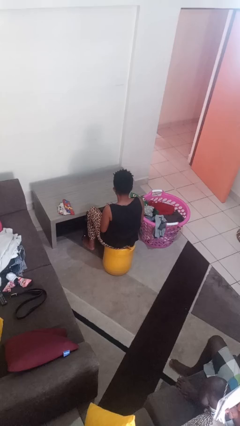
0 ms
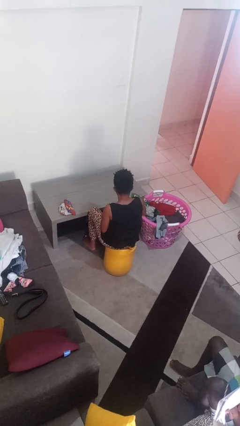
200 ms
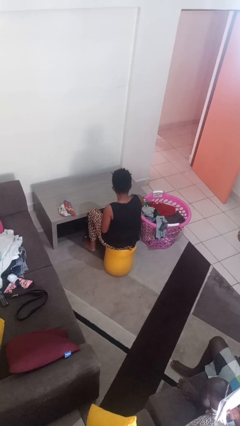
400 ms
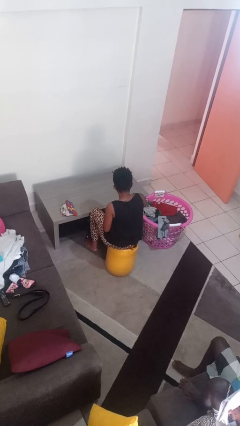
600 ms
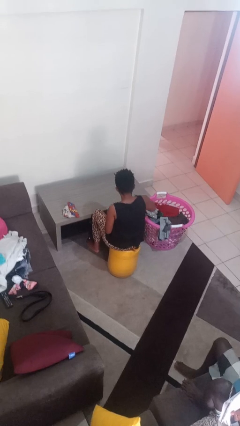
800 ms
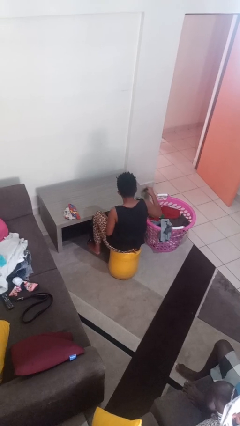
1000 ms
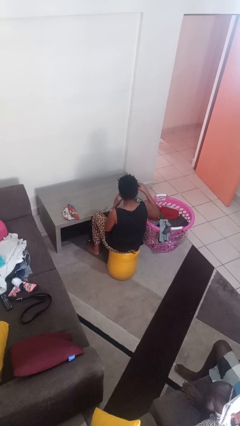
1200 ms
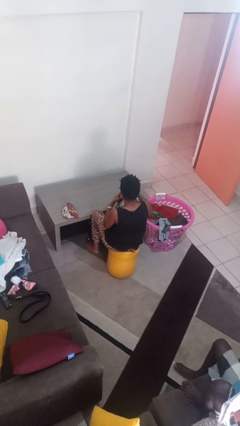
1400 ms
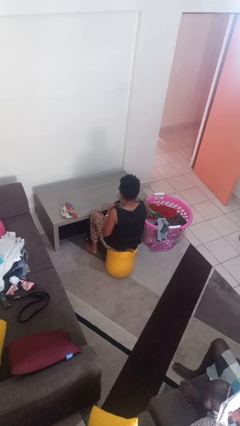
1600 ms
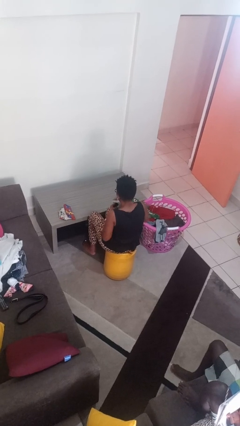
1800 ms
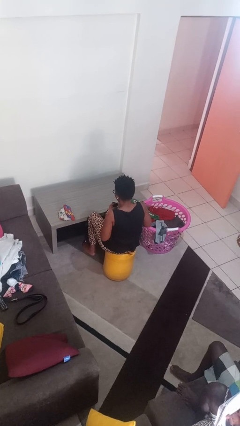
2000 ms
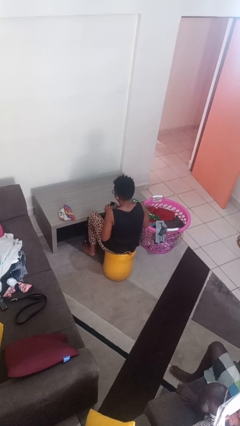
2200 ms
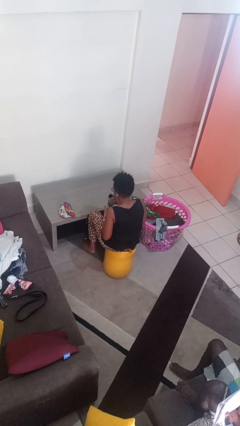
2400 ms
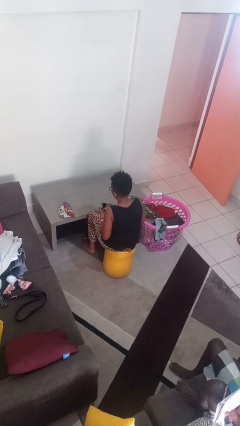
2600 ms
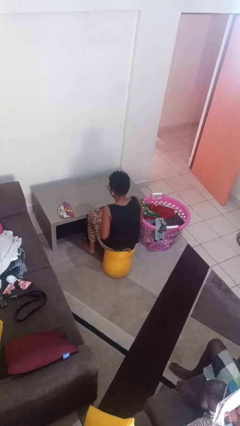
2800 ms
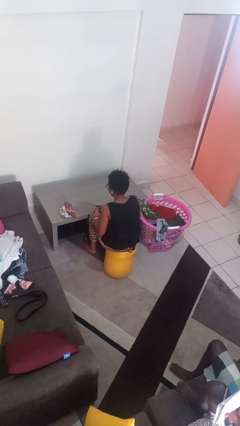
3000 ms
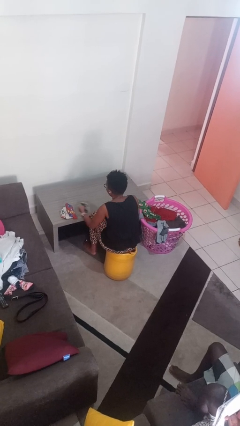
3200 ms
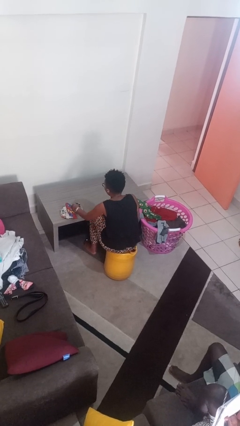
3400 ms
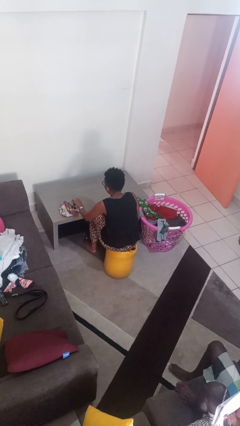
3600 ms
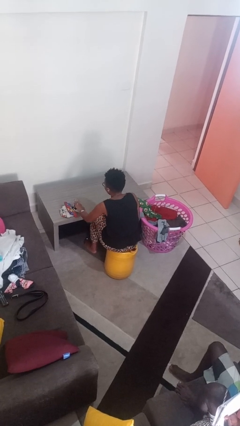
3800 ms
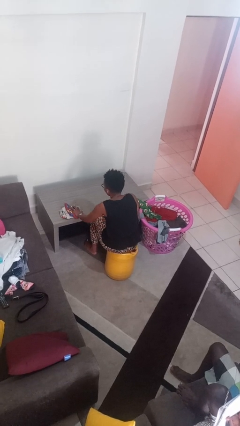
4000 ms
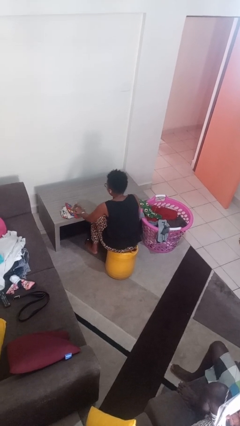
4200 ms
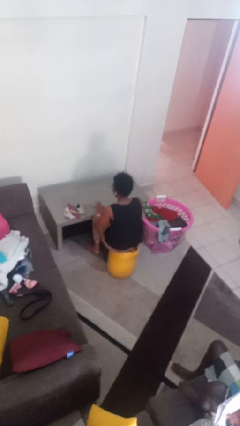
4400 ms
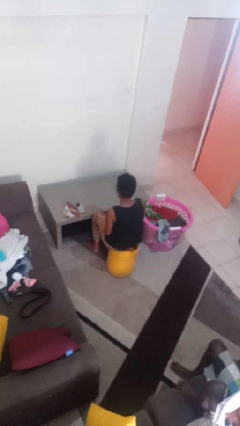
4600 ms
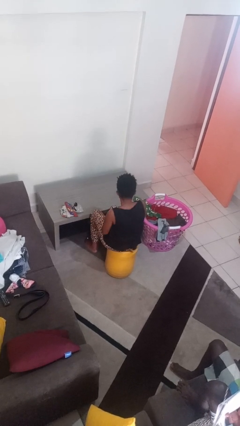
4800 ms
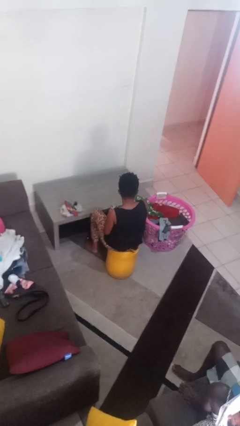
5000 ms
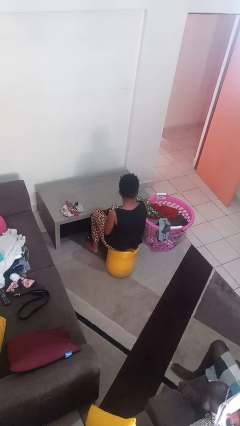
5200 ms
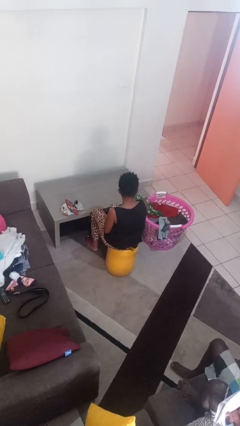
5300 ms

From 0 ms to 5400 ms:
person folds socks

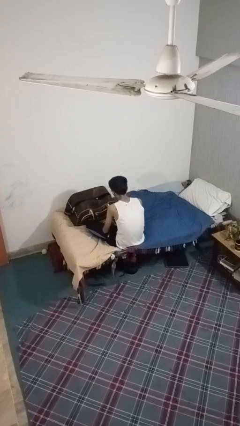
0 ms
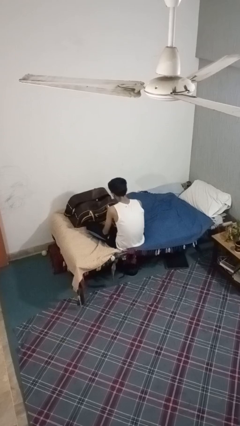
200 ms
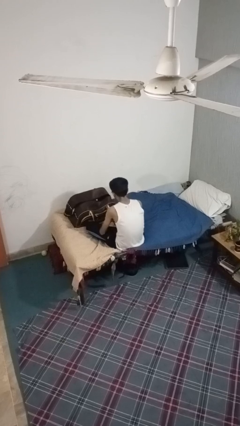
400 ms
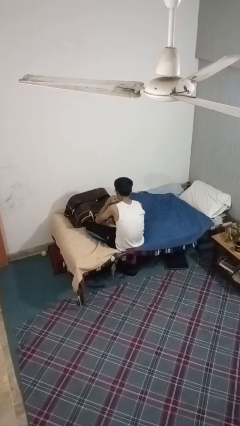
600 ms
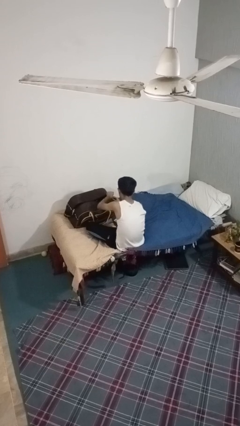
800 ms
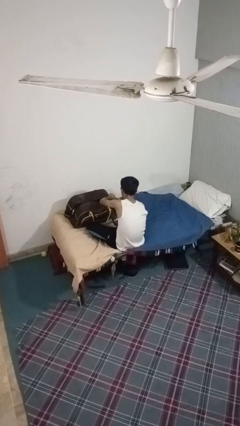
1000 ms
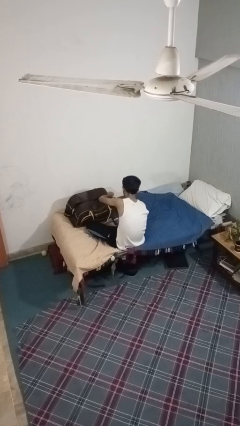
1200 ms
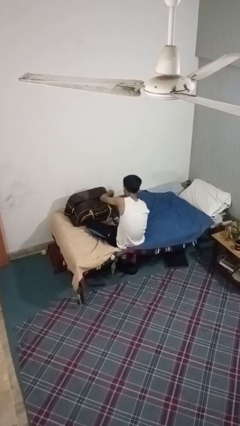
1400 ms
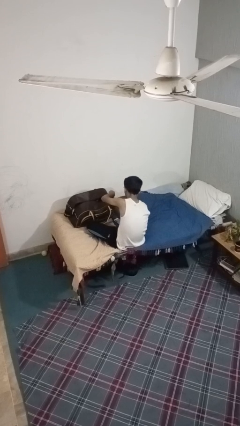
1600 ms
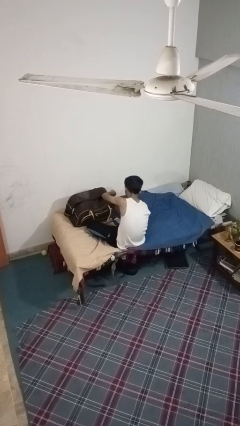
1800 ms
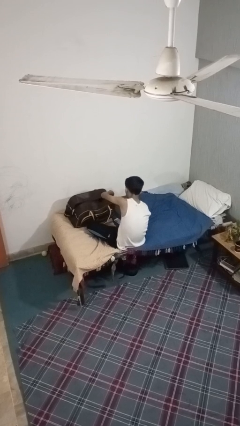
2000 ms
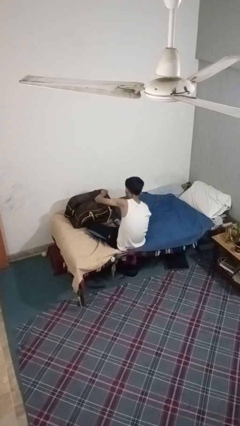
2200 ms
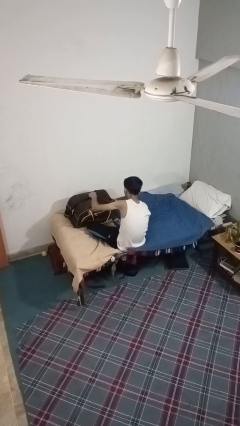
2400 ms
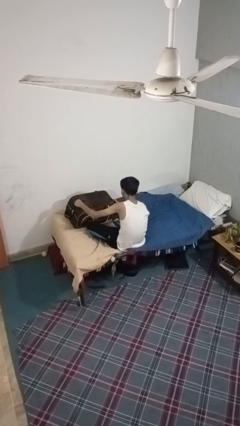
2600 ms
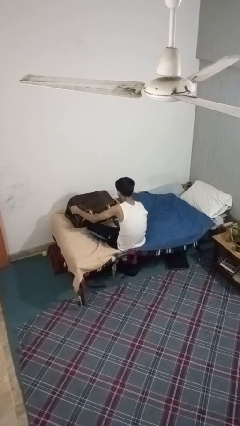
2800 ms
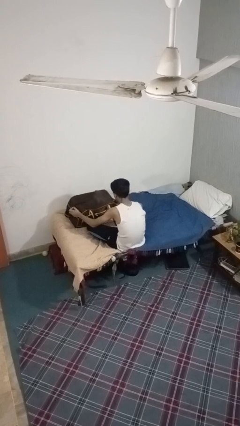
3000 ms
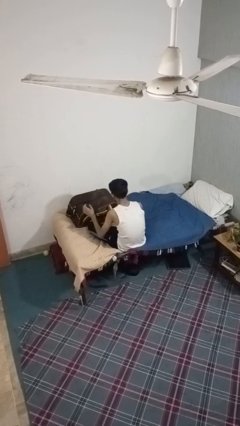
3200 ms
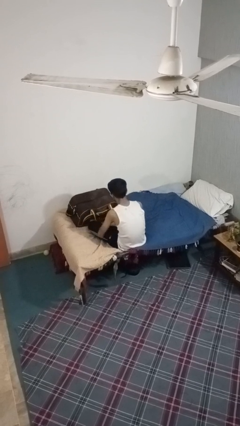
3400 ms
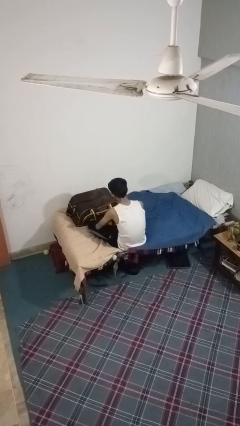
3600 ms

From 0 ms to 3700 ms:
person closes suitcase

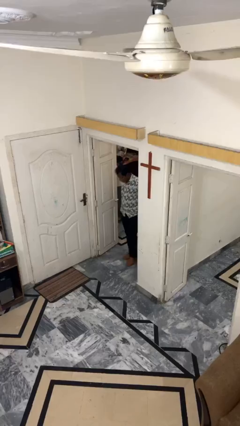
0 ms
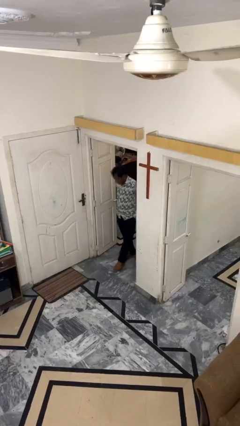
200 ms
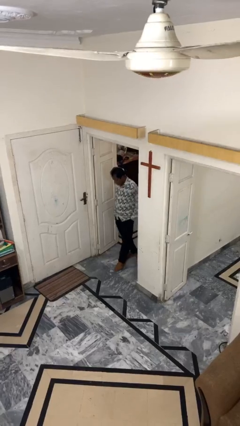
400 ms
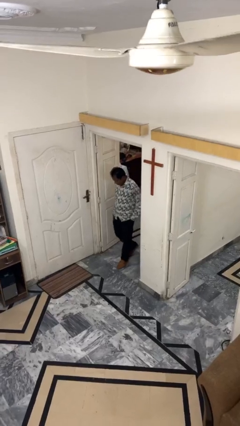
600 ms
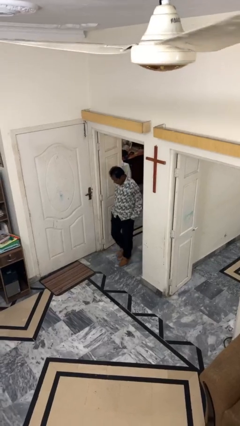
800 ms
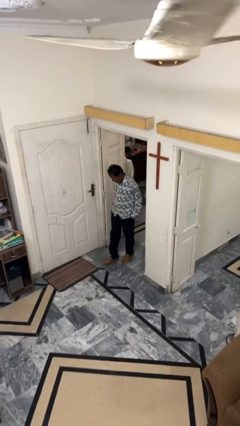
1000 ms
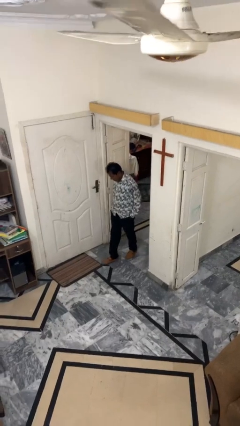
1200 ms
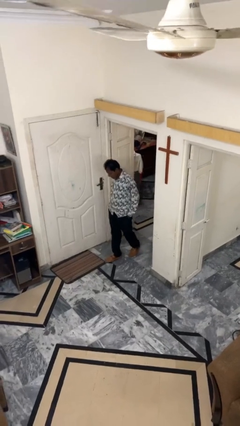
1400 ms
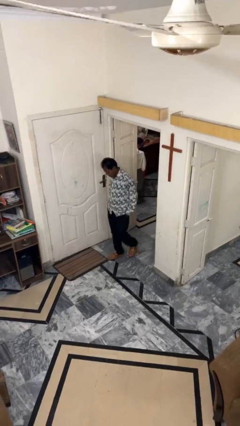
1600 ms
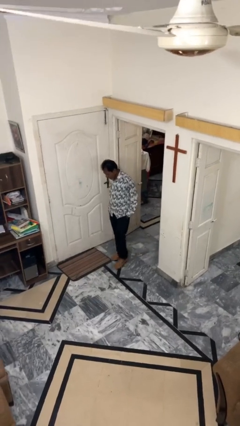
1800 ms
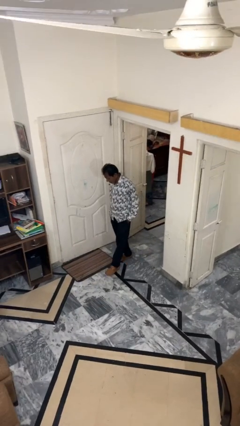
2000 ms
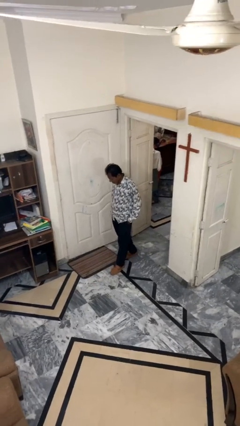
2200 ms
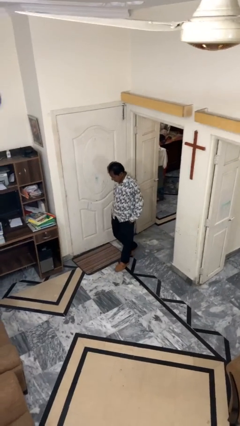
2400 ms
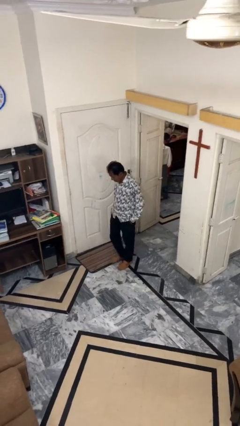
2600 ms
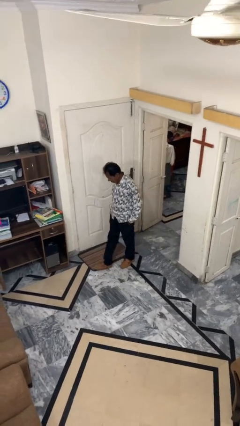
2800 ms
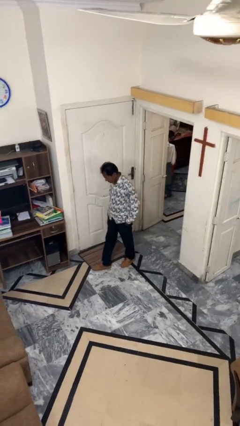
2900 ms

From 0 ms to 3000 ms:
person enters scene through structure

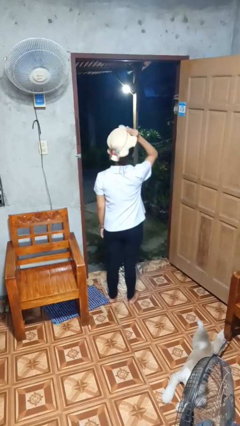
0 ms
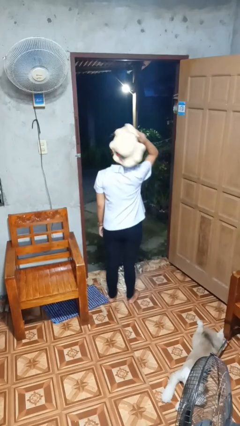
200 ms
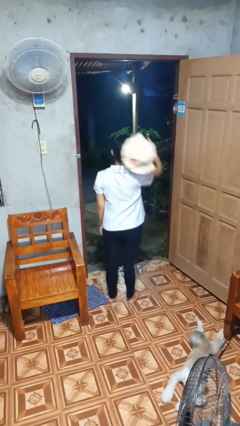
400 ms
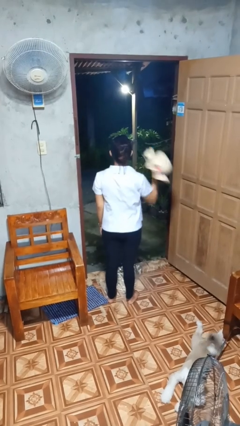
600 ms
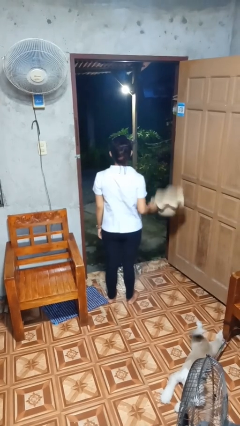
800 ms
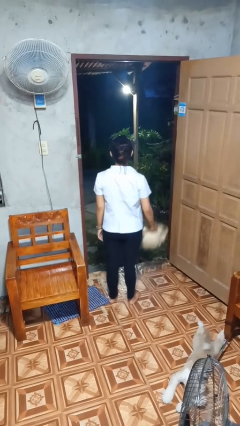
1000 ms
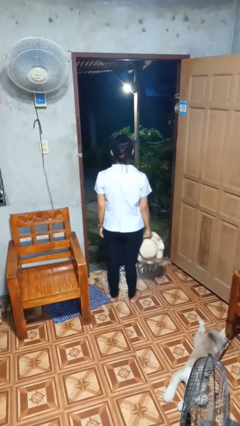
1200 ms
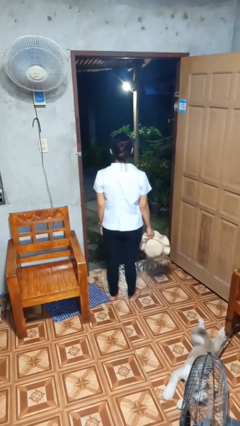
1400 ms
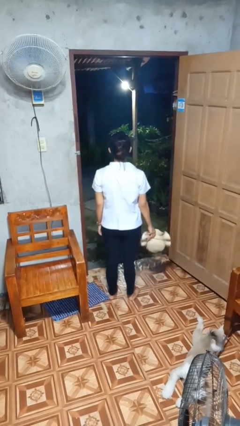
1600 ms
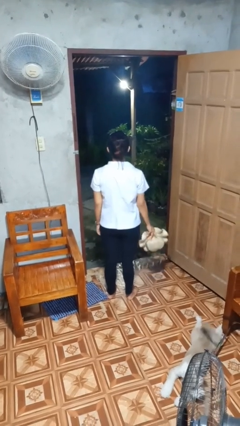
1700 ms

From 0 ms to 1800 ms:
person takes off hat

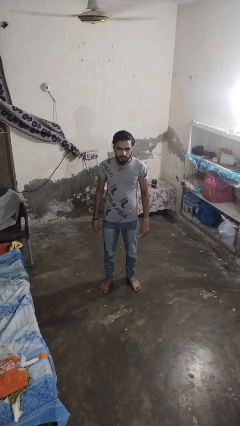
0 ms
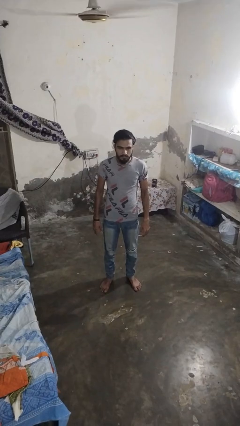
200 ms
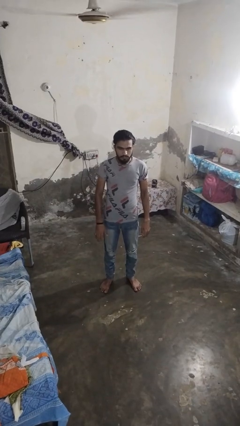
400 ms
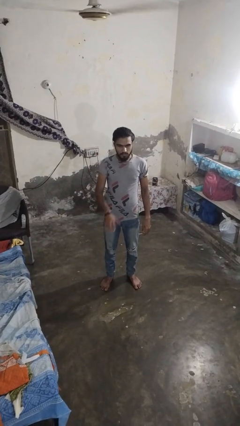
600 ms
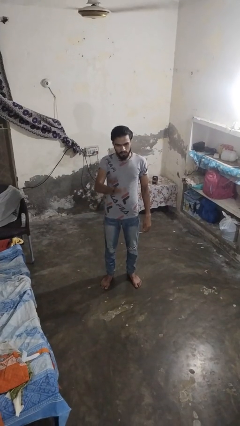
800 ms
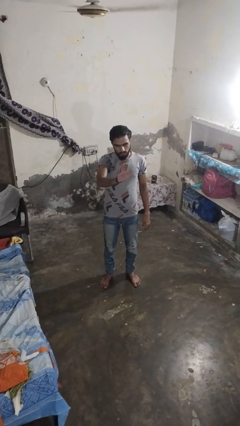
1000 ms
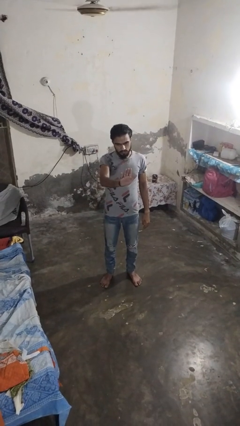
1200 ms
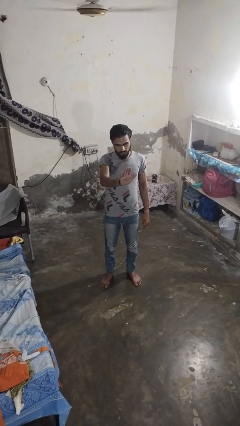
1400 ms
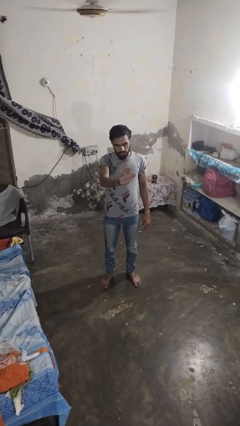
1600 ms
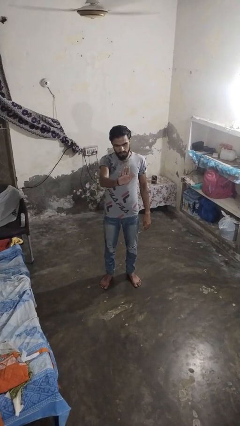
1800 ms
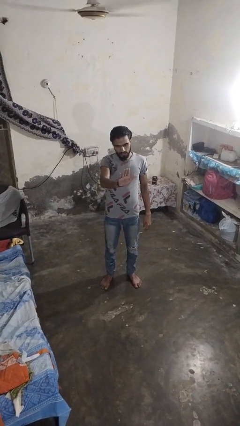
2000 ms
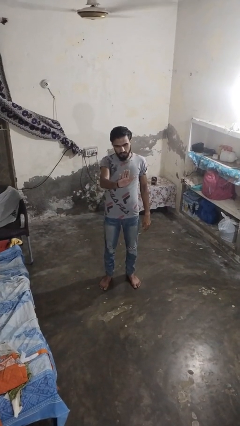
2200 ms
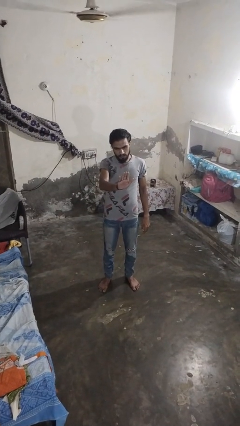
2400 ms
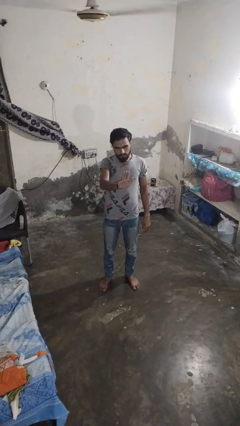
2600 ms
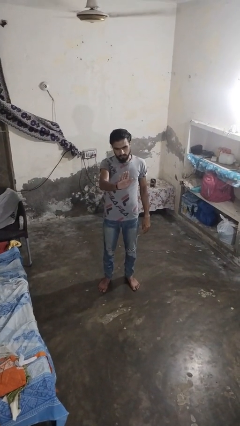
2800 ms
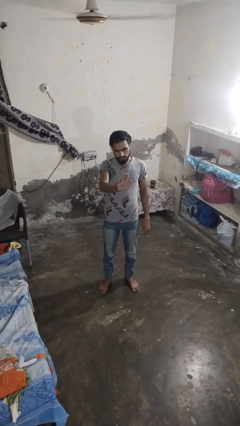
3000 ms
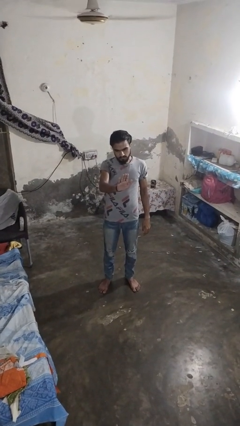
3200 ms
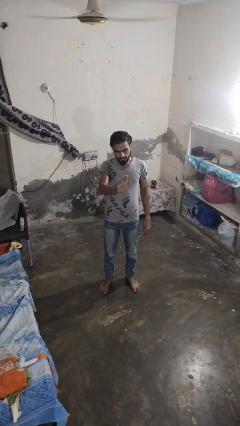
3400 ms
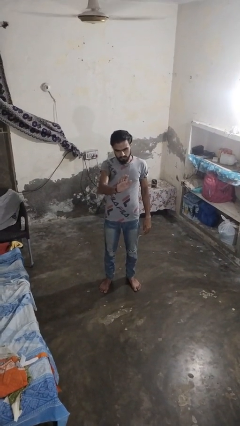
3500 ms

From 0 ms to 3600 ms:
person gestures stop

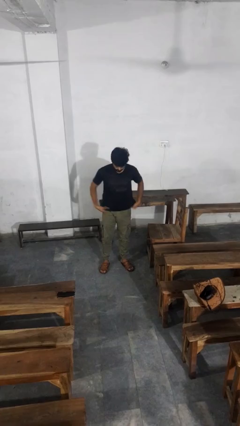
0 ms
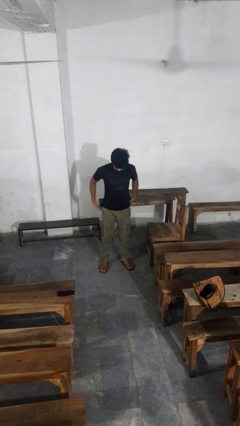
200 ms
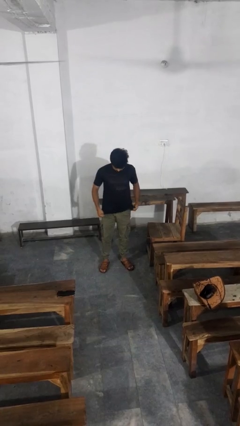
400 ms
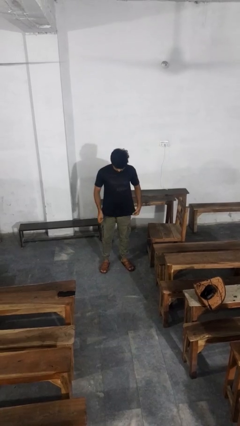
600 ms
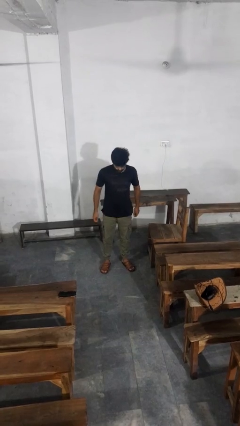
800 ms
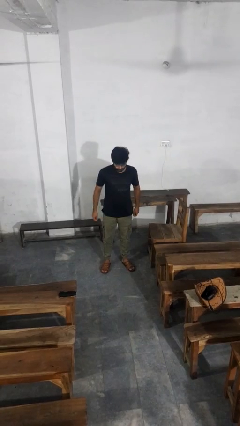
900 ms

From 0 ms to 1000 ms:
person untucks shirt
